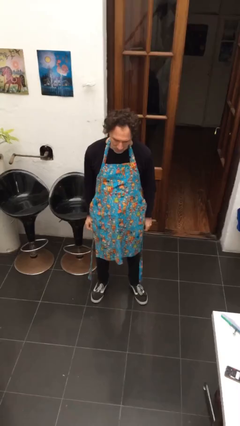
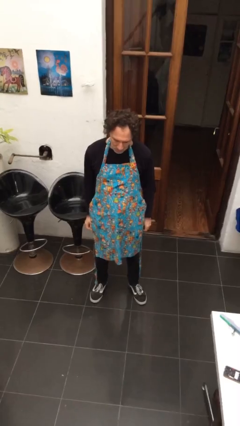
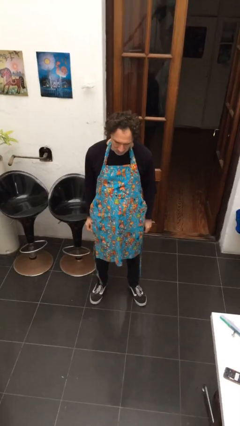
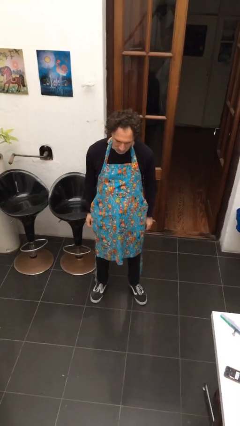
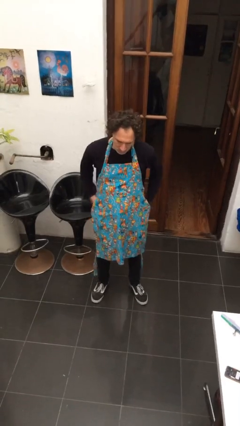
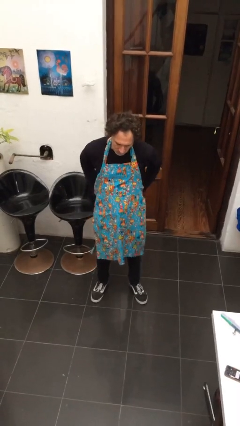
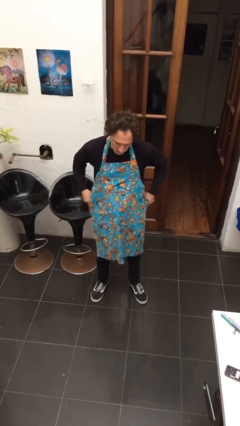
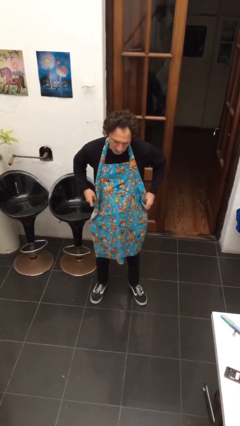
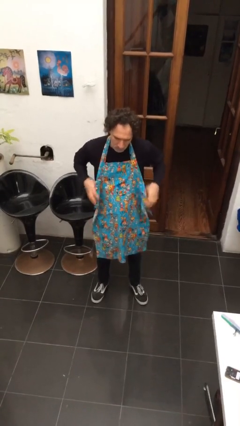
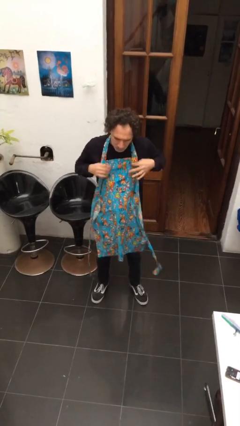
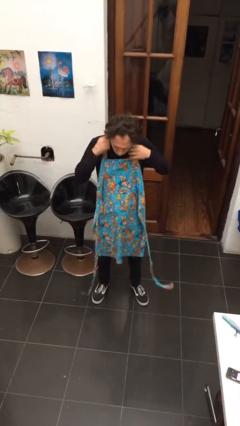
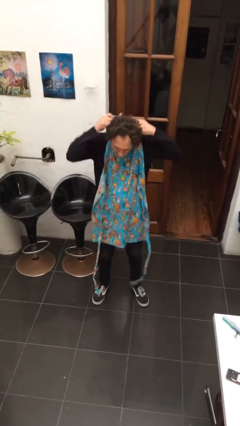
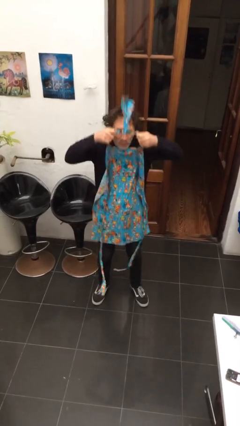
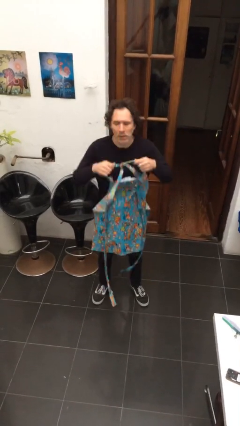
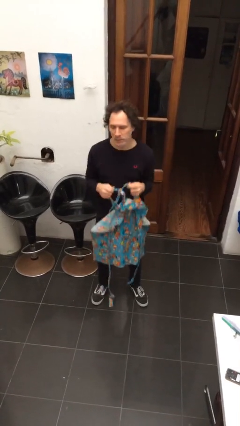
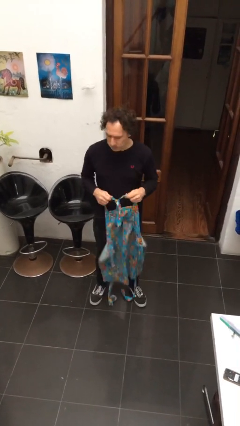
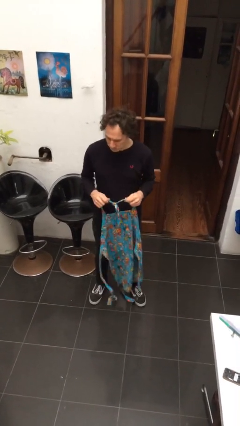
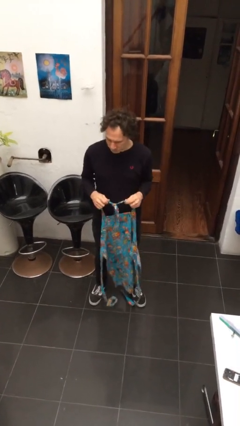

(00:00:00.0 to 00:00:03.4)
person takes off apron

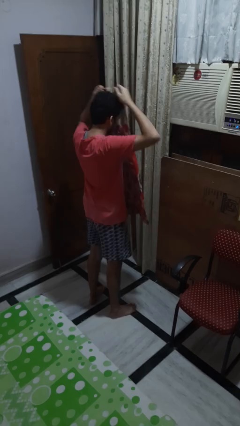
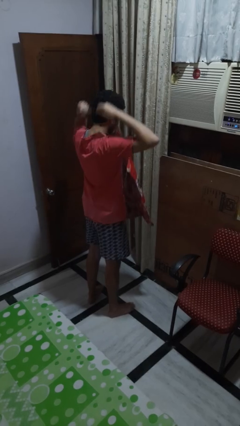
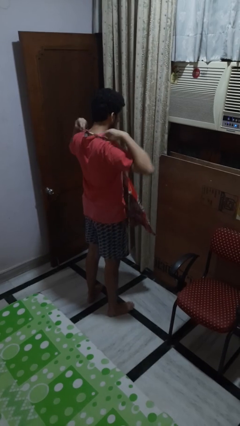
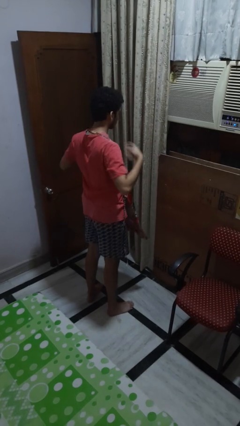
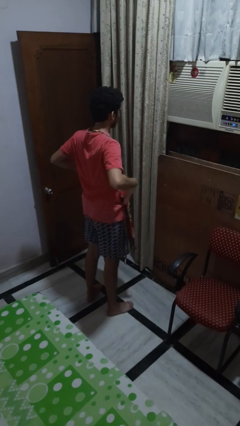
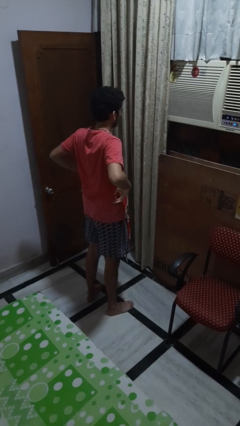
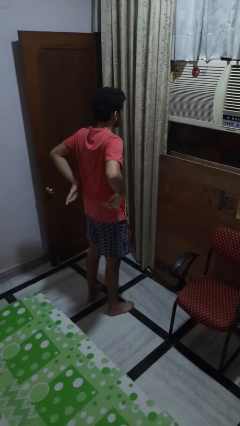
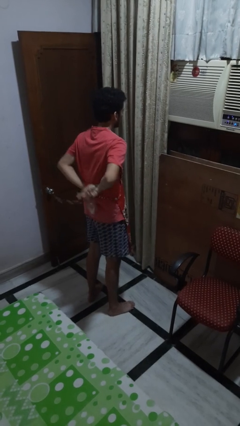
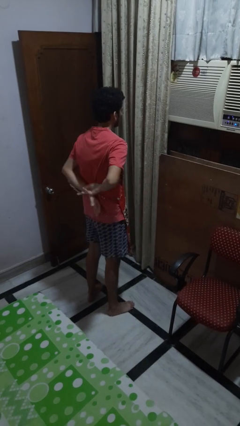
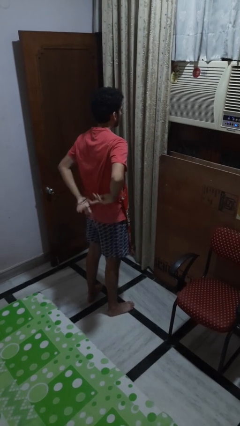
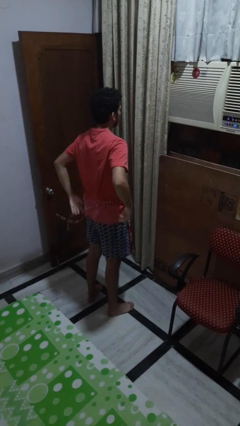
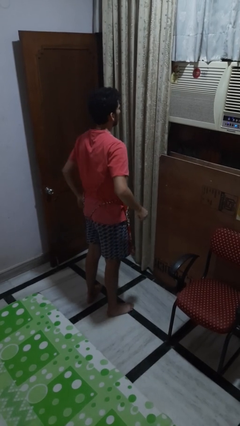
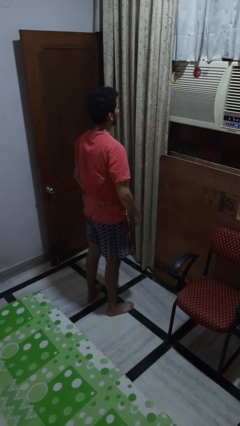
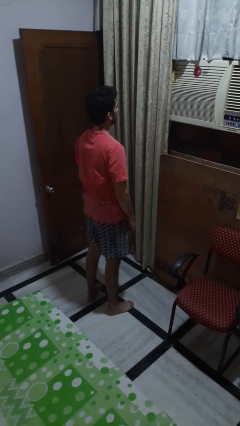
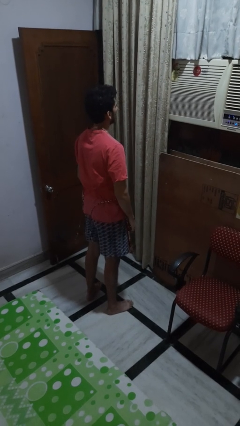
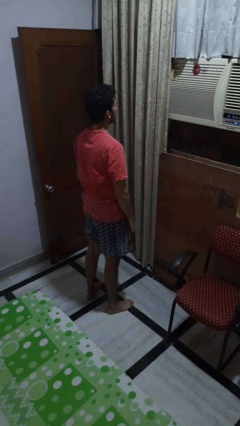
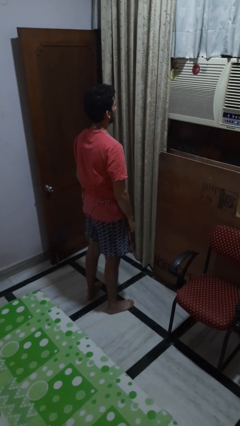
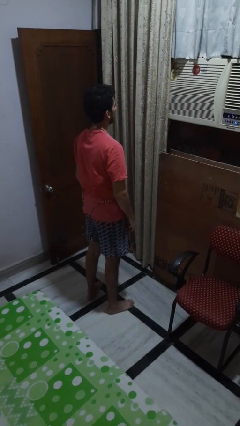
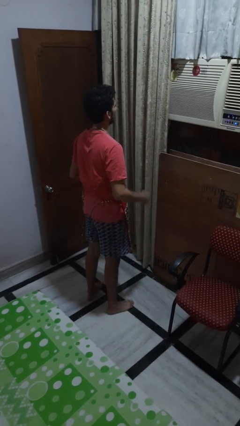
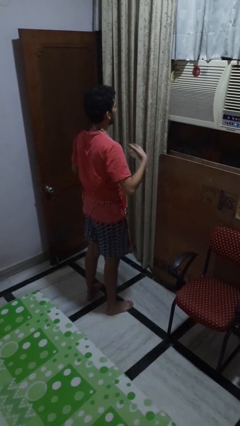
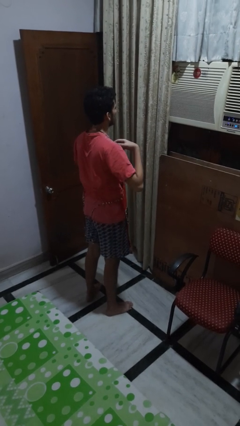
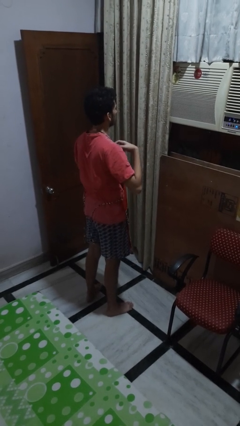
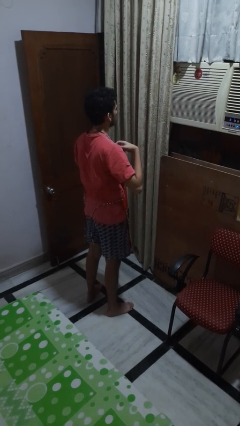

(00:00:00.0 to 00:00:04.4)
person puts on apron

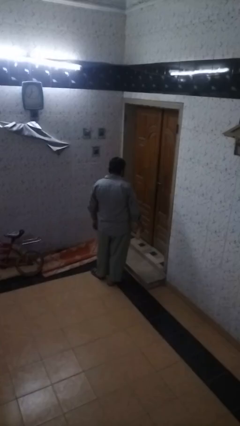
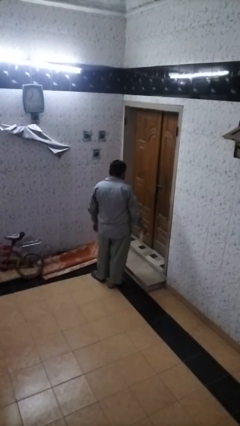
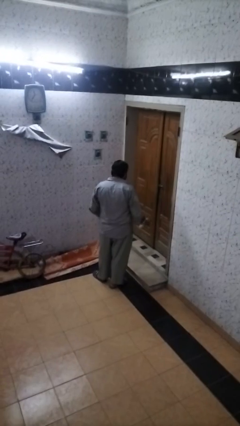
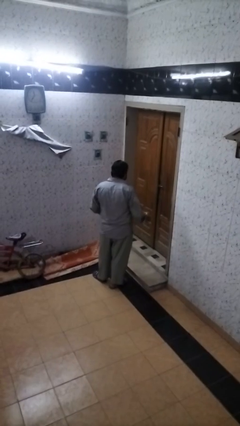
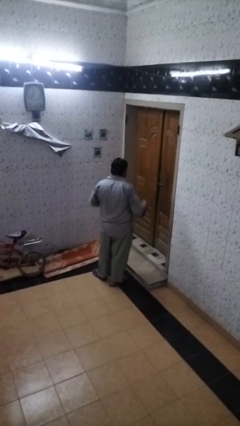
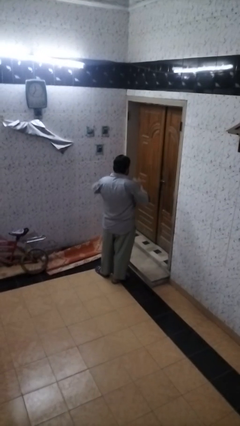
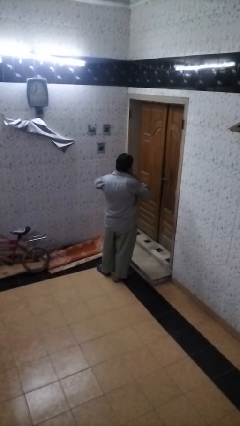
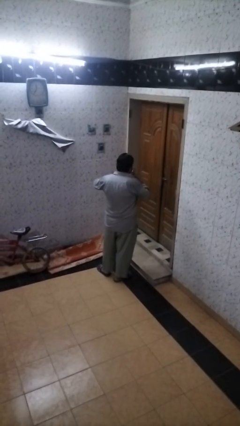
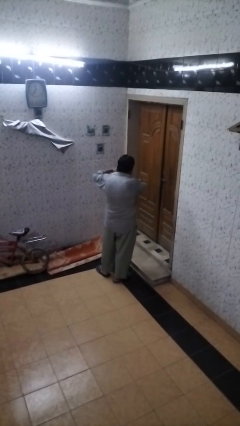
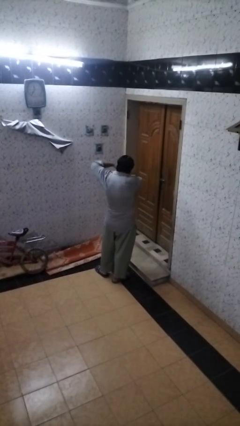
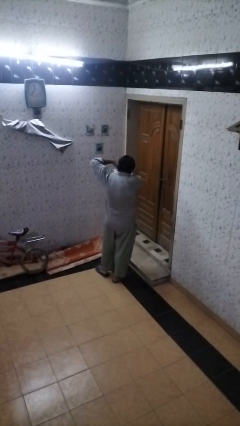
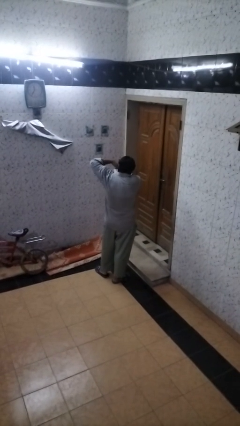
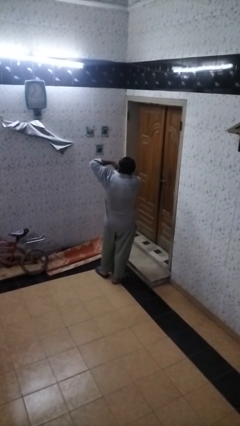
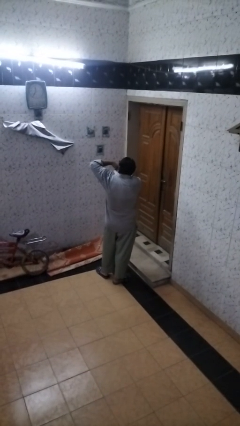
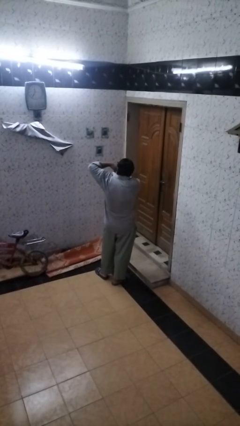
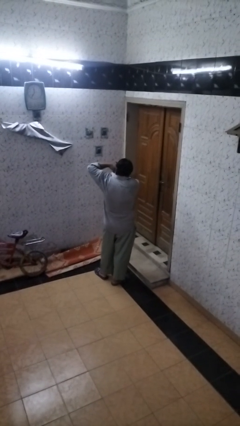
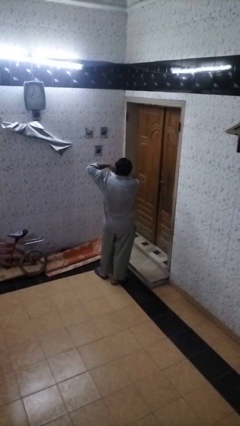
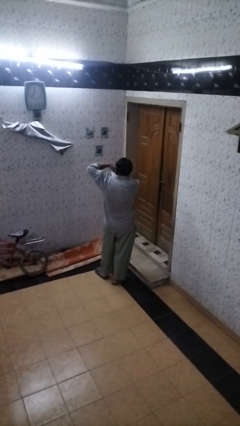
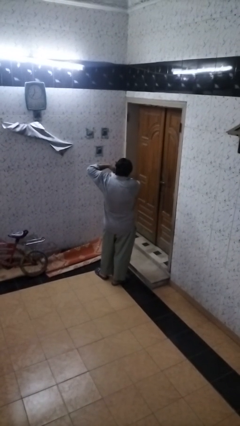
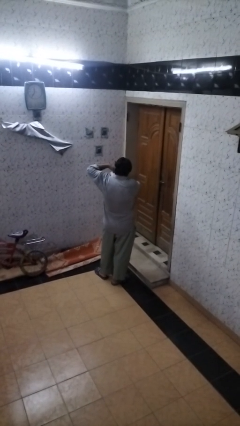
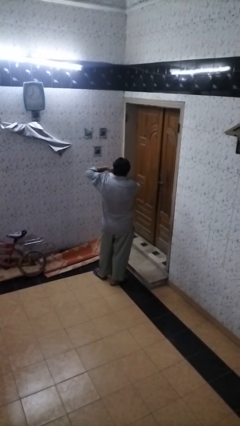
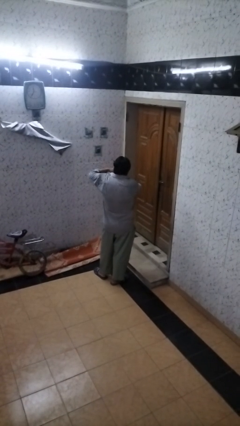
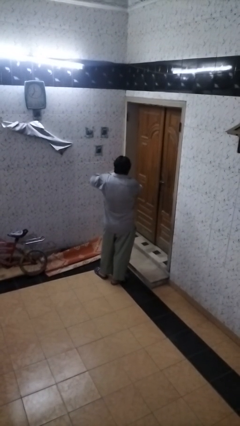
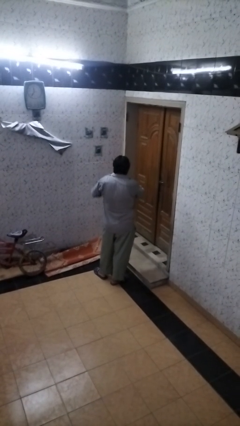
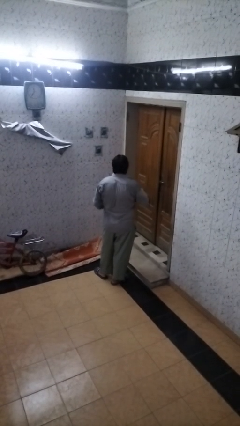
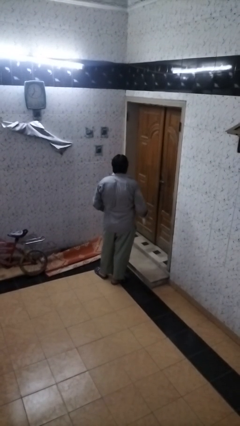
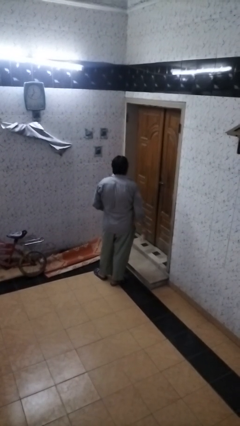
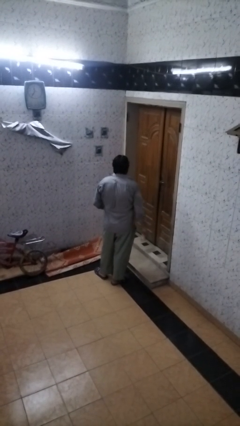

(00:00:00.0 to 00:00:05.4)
person applies deodorant

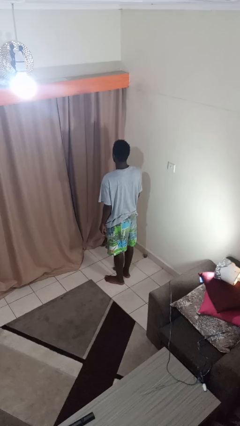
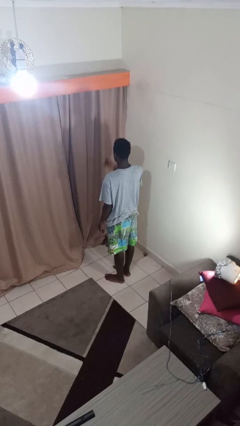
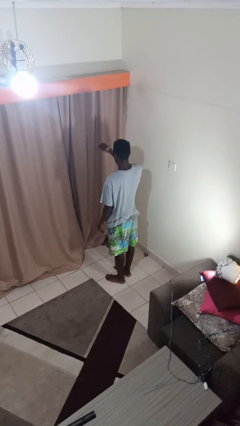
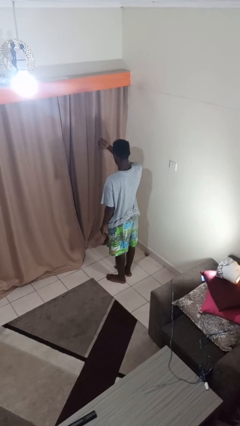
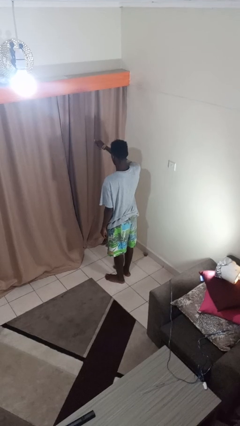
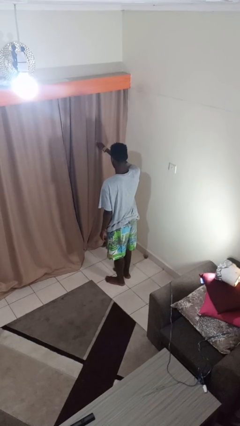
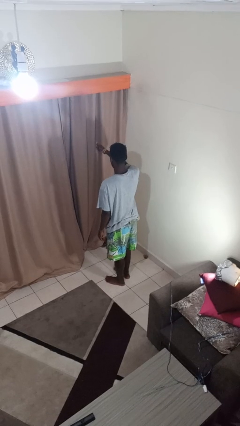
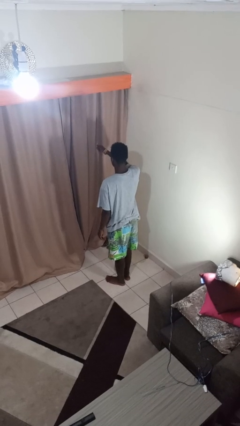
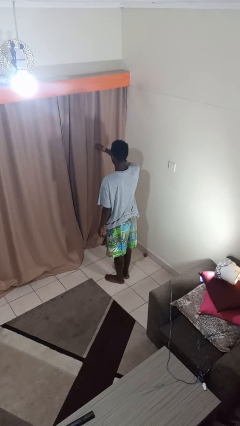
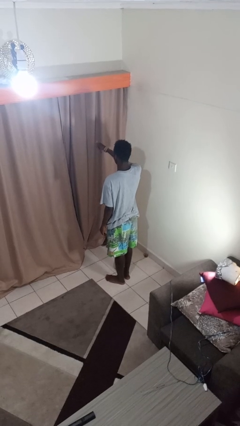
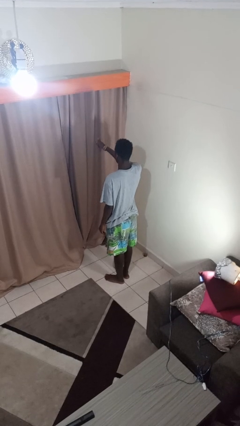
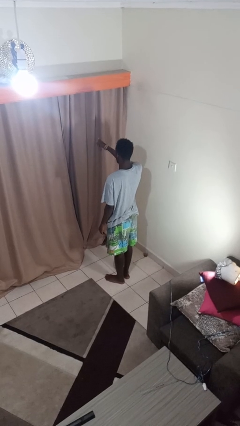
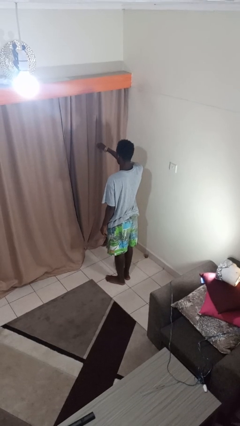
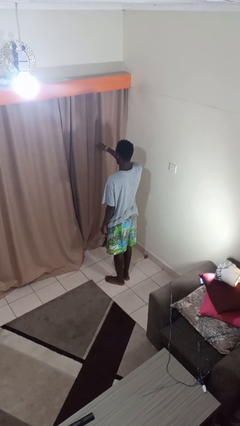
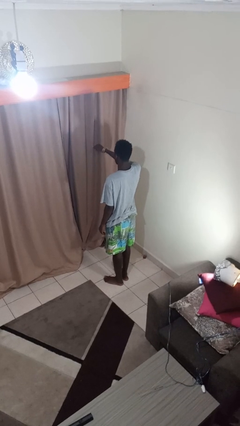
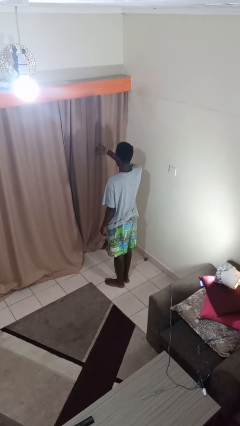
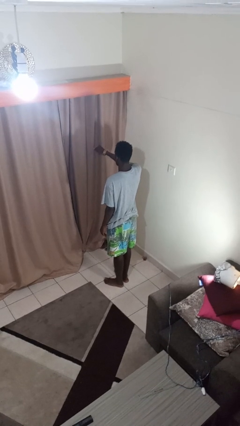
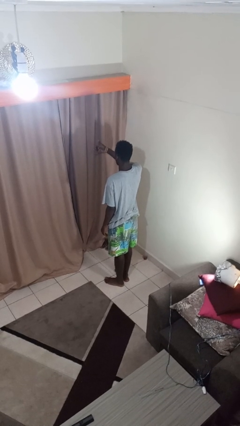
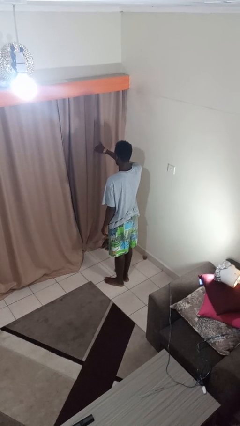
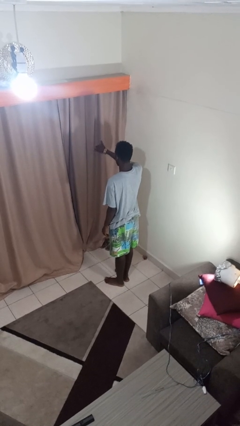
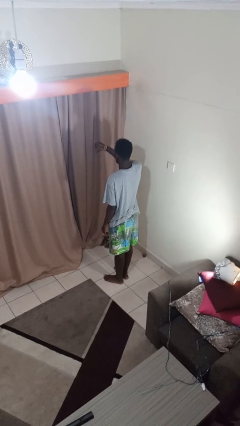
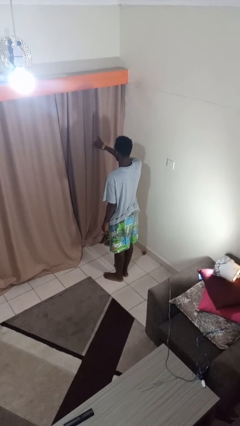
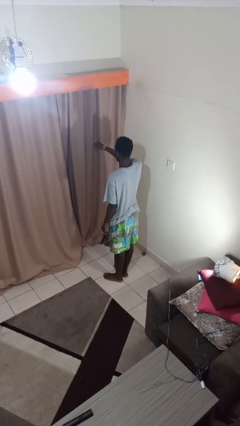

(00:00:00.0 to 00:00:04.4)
person gestures hang loose

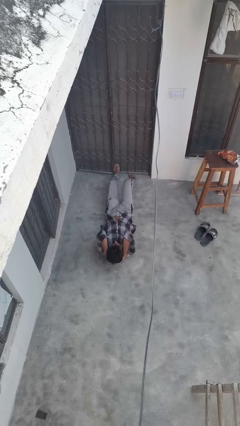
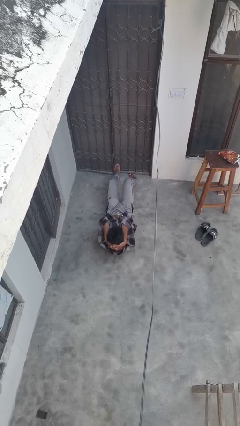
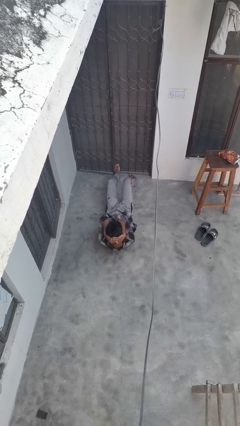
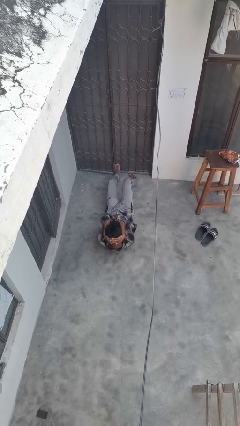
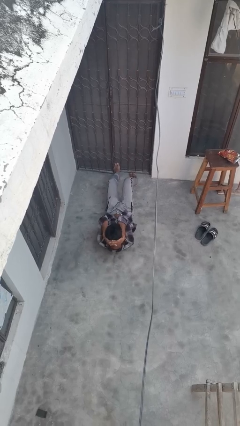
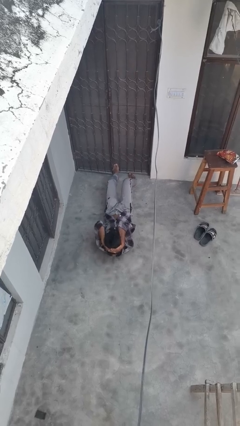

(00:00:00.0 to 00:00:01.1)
person exercises with situp
